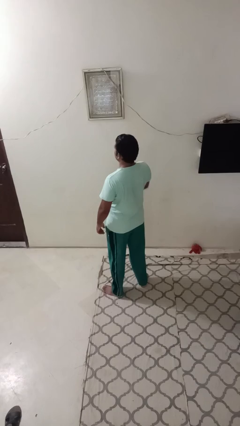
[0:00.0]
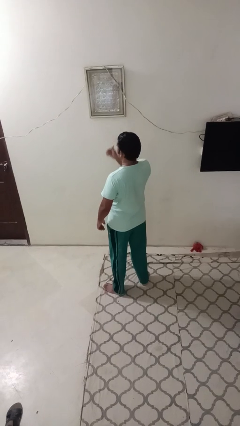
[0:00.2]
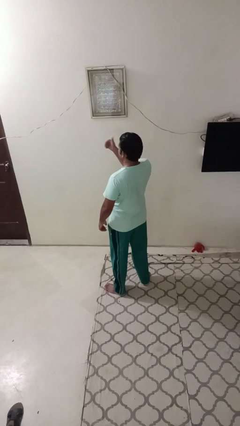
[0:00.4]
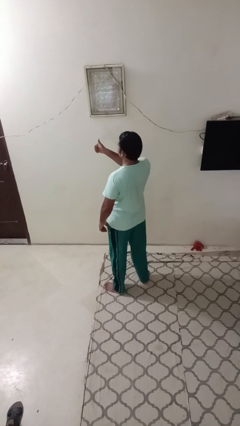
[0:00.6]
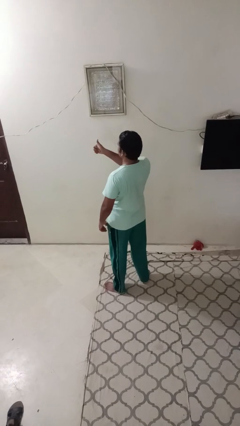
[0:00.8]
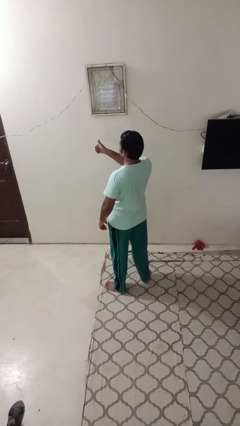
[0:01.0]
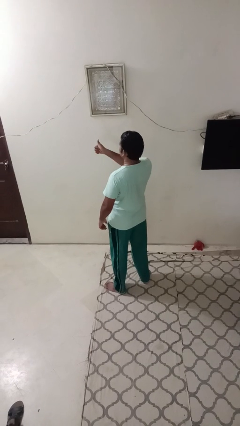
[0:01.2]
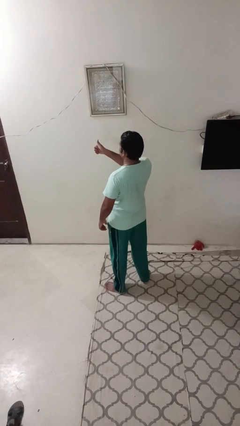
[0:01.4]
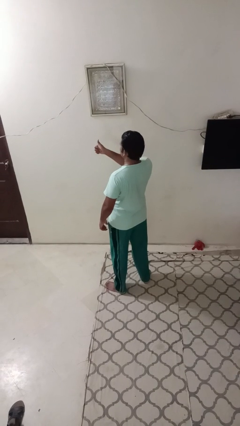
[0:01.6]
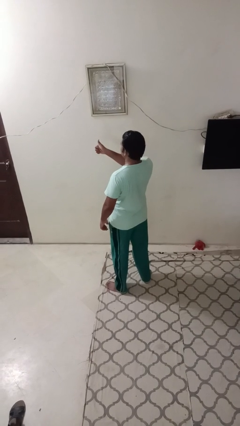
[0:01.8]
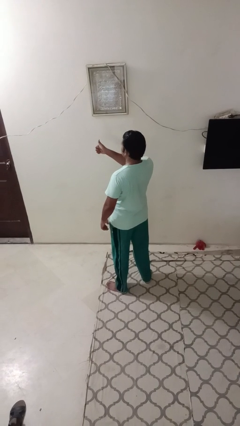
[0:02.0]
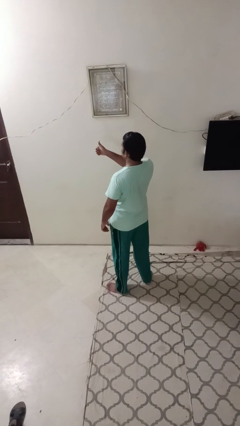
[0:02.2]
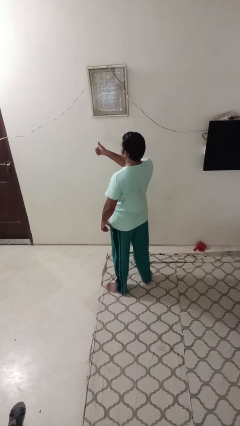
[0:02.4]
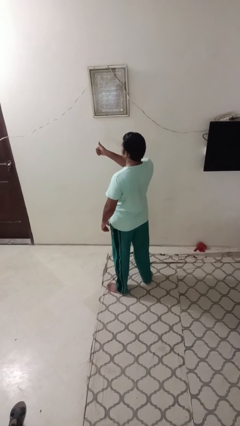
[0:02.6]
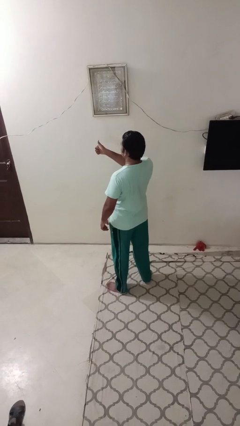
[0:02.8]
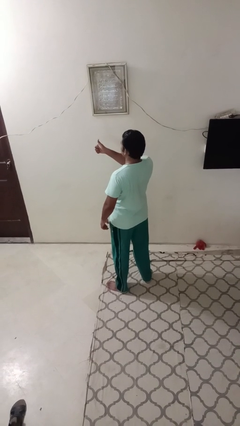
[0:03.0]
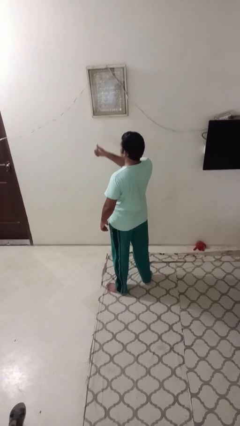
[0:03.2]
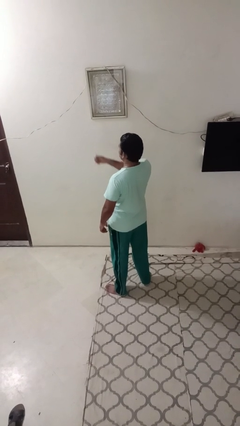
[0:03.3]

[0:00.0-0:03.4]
person gestures thumbs up

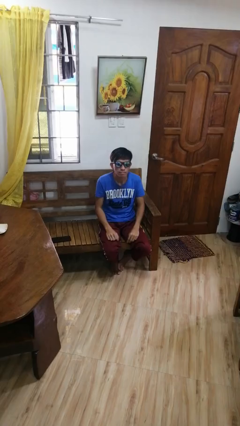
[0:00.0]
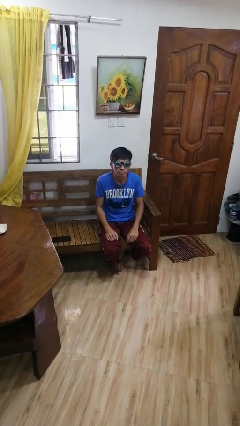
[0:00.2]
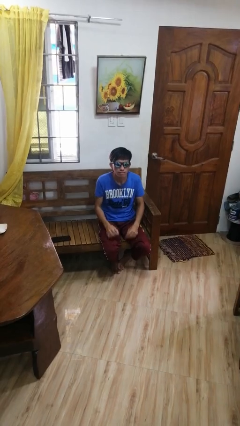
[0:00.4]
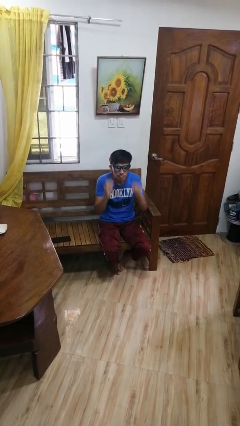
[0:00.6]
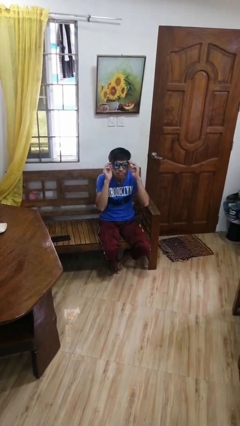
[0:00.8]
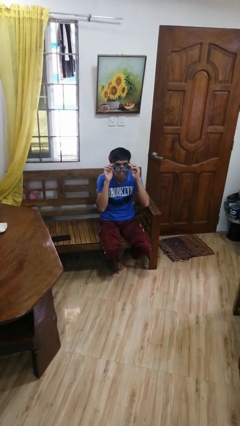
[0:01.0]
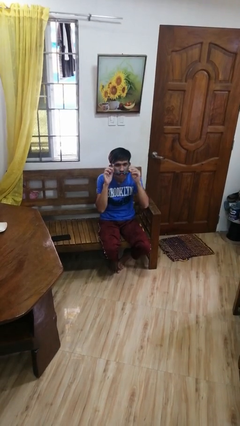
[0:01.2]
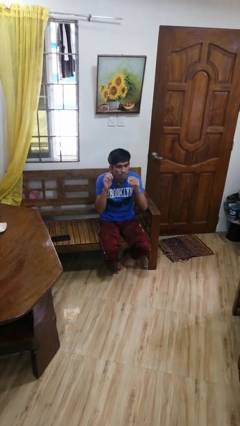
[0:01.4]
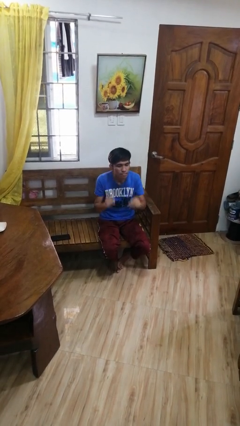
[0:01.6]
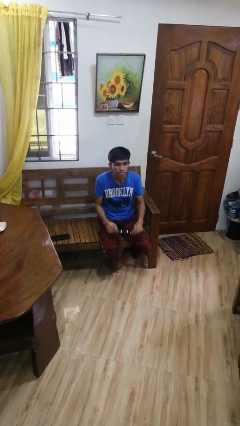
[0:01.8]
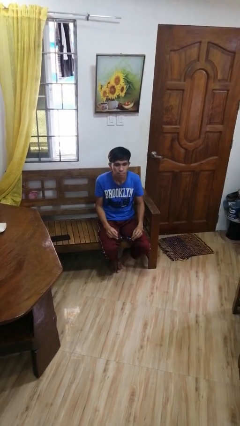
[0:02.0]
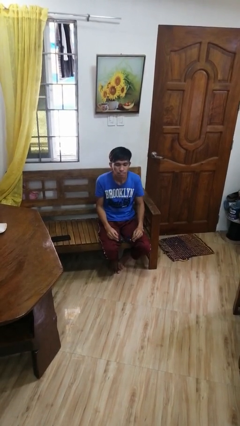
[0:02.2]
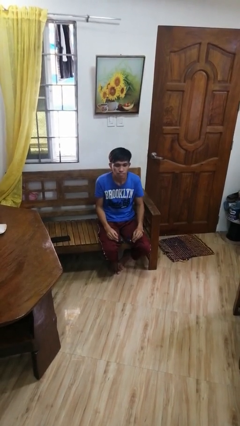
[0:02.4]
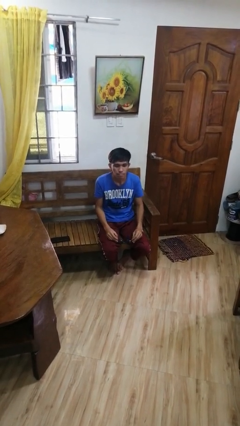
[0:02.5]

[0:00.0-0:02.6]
person takes off sunglasses

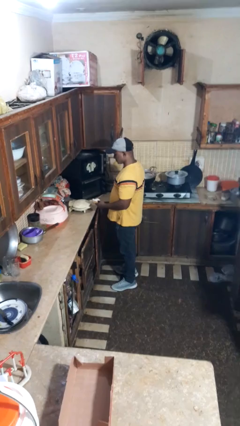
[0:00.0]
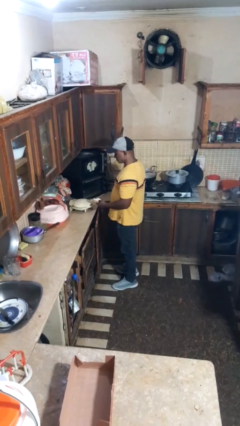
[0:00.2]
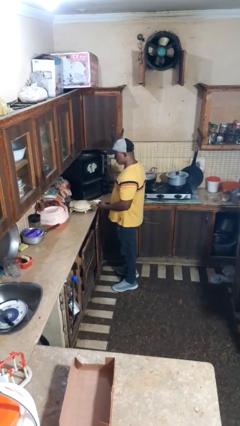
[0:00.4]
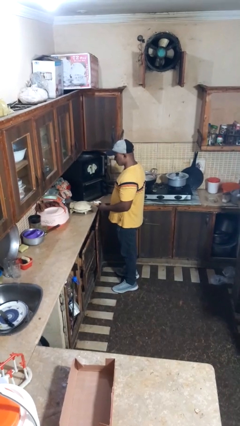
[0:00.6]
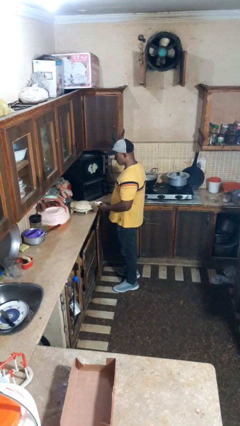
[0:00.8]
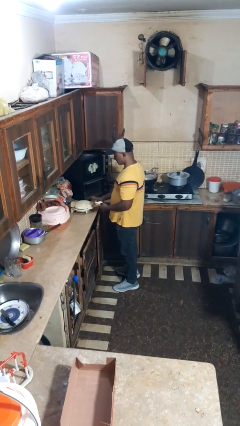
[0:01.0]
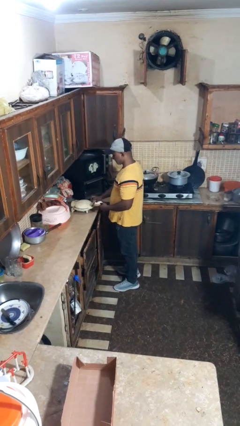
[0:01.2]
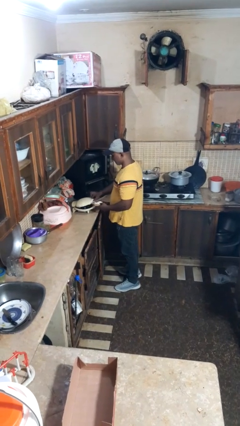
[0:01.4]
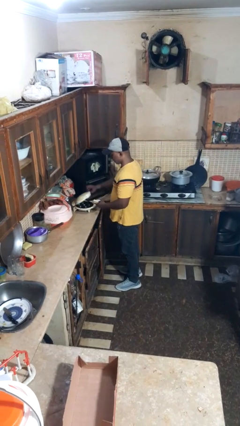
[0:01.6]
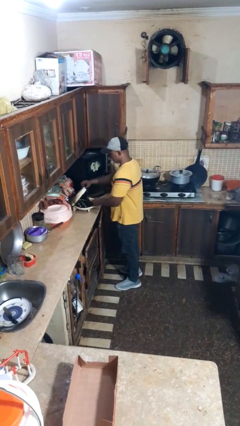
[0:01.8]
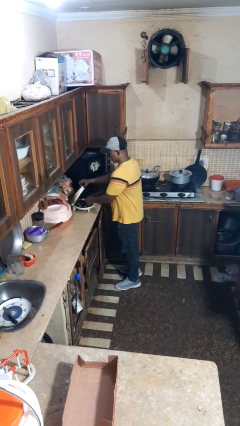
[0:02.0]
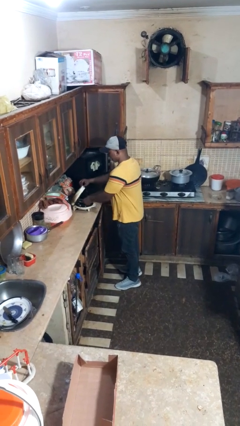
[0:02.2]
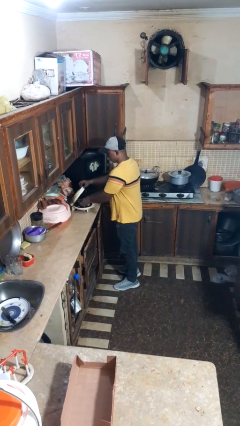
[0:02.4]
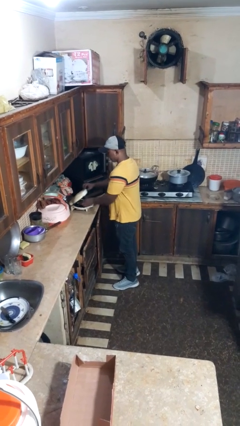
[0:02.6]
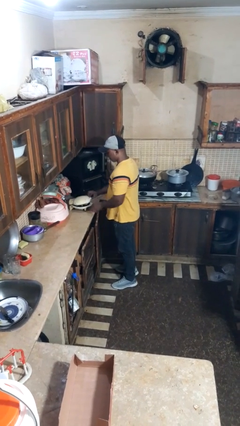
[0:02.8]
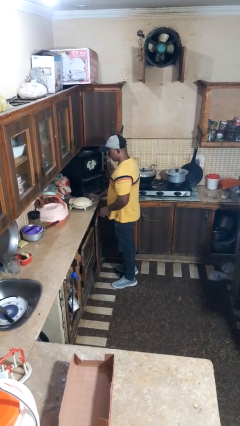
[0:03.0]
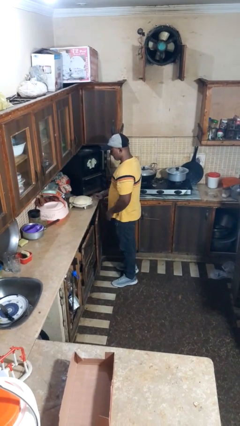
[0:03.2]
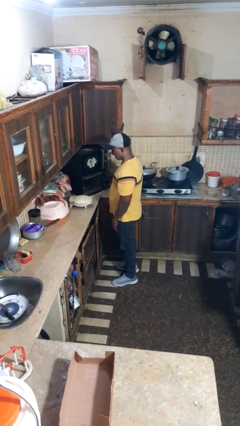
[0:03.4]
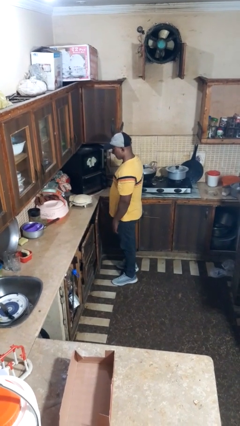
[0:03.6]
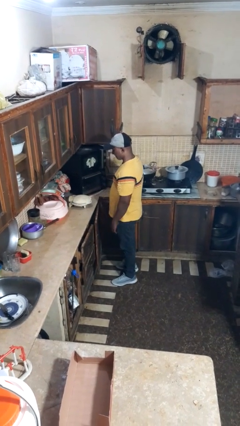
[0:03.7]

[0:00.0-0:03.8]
person puts object into toaster

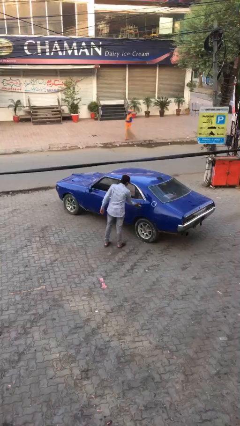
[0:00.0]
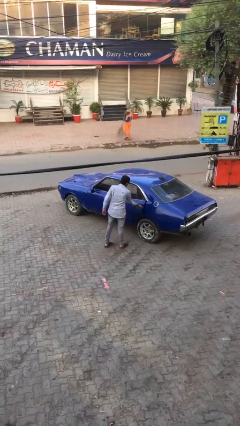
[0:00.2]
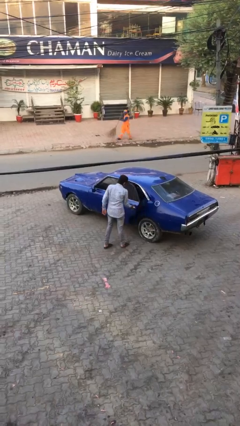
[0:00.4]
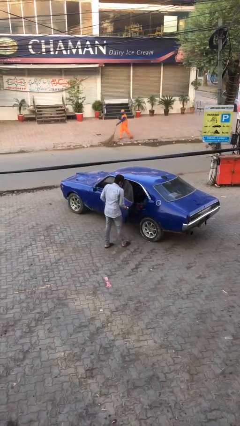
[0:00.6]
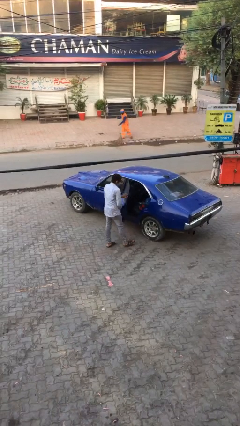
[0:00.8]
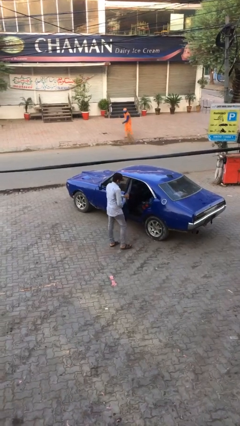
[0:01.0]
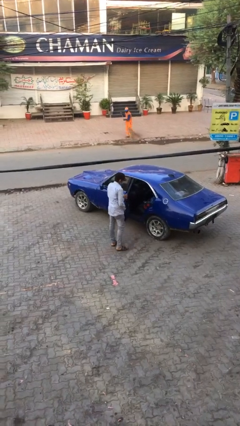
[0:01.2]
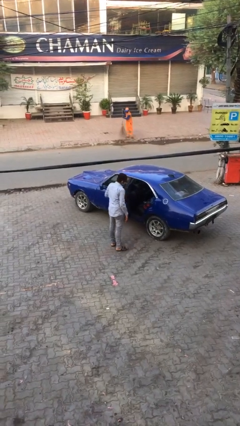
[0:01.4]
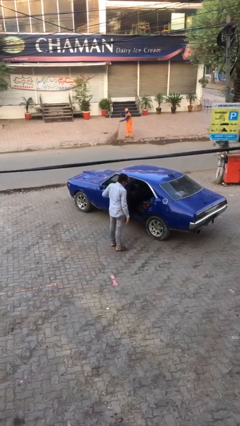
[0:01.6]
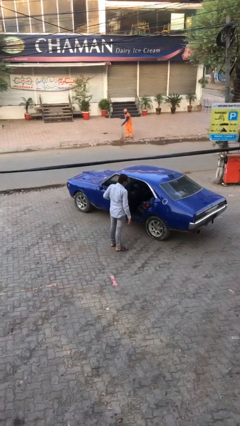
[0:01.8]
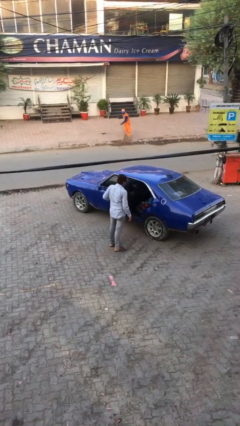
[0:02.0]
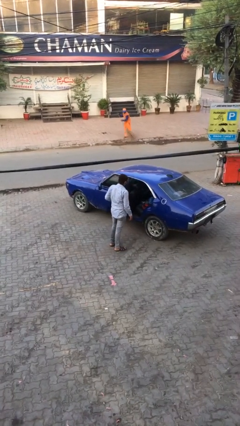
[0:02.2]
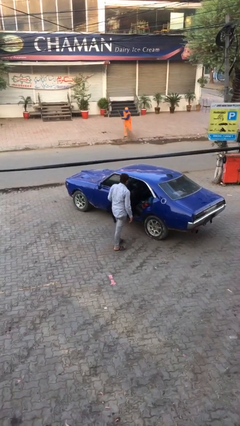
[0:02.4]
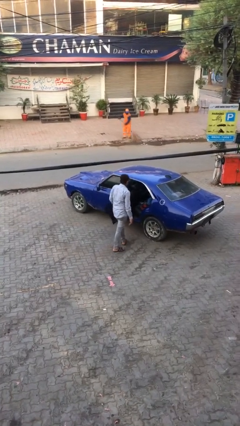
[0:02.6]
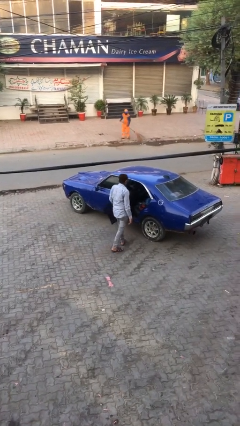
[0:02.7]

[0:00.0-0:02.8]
person opens car door

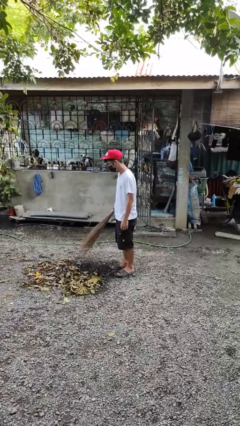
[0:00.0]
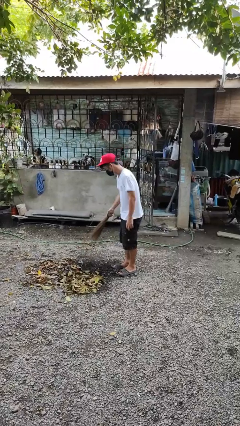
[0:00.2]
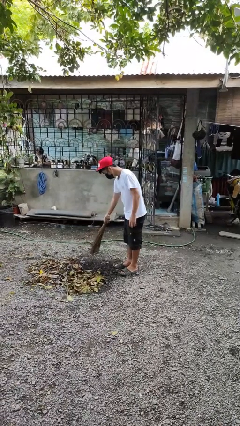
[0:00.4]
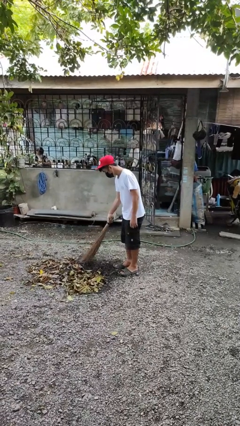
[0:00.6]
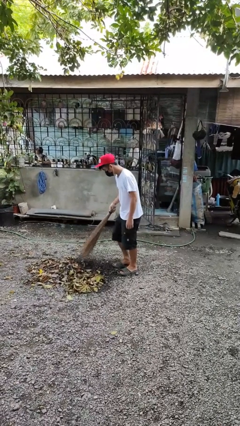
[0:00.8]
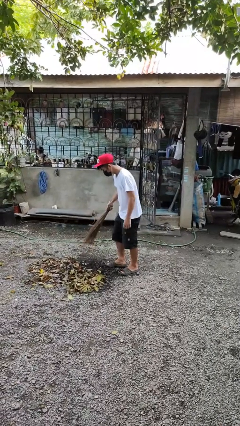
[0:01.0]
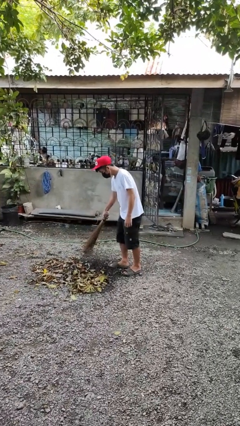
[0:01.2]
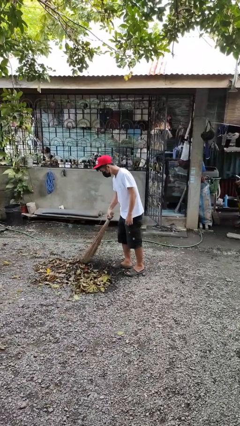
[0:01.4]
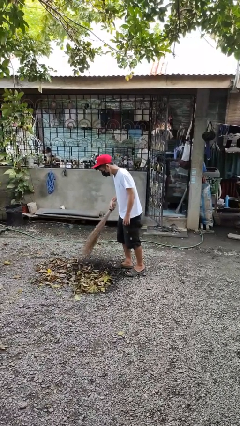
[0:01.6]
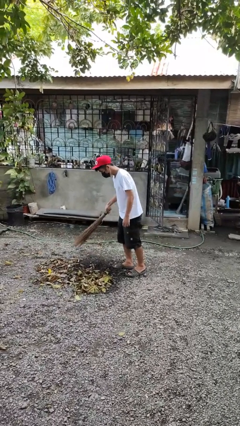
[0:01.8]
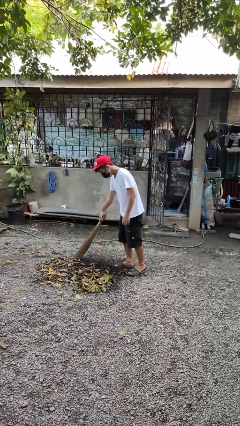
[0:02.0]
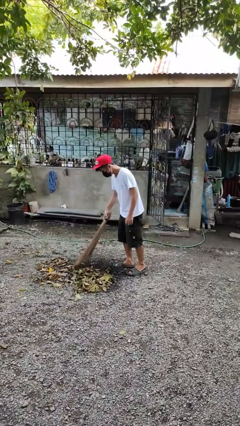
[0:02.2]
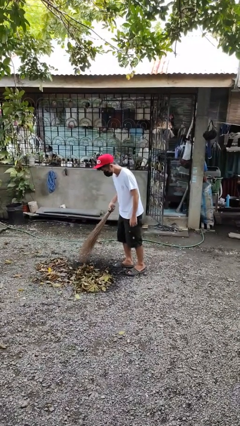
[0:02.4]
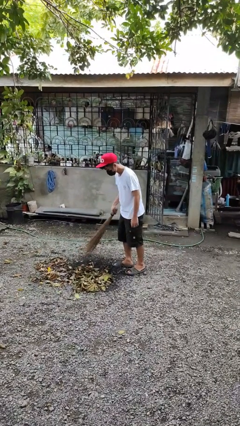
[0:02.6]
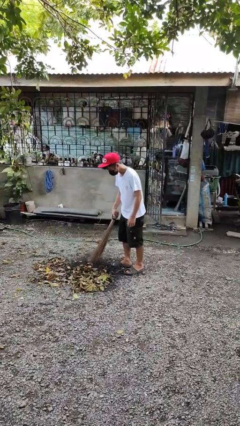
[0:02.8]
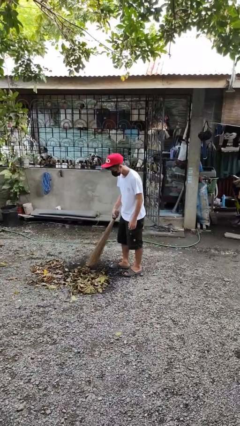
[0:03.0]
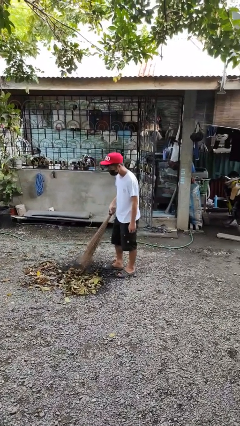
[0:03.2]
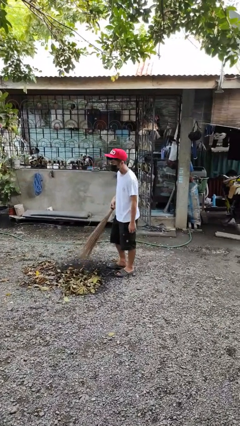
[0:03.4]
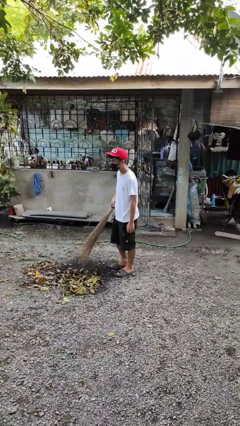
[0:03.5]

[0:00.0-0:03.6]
person sweeps floor

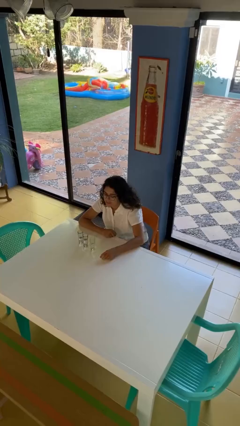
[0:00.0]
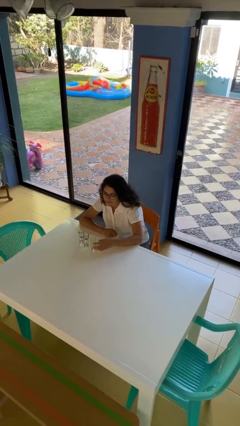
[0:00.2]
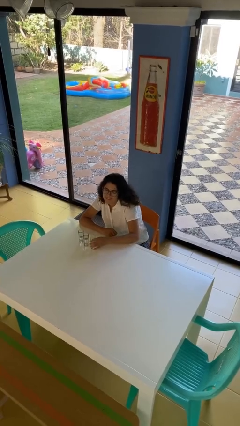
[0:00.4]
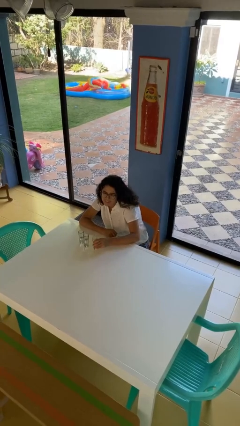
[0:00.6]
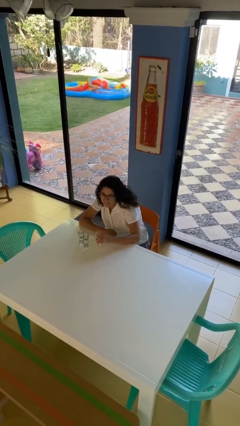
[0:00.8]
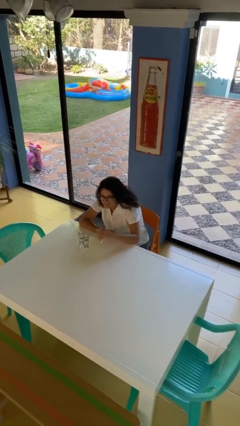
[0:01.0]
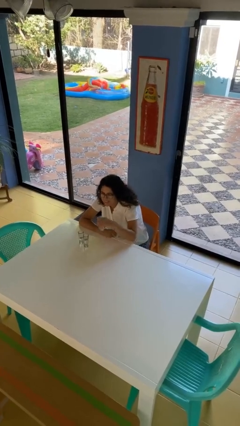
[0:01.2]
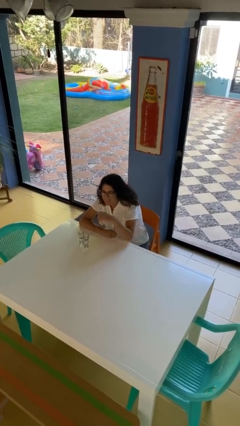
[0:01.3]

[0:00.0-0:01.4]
person picks up object from table

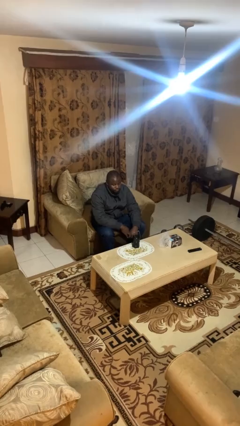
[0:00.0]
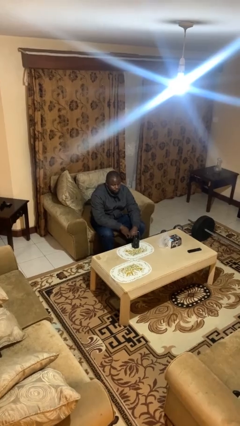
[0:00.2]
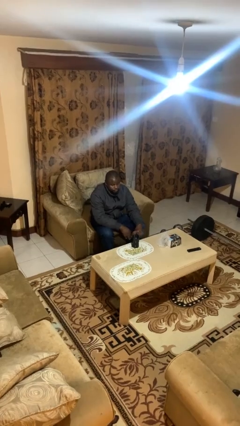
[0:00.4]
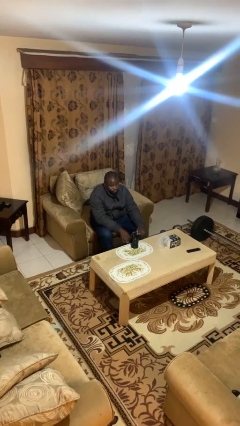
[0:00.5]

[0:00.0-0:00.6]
person turns off lamp
